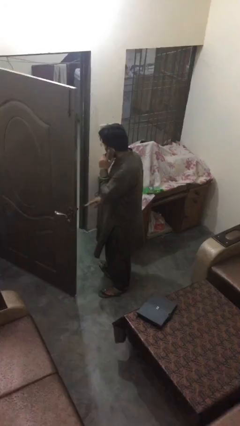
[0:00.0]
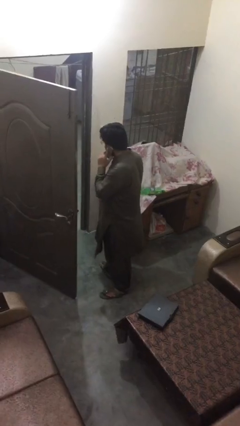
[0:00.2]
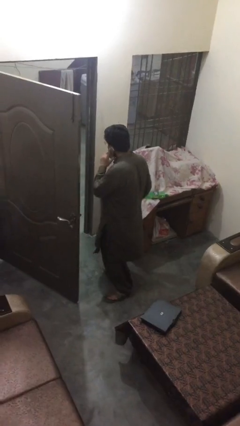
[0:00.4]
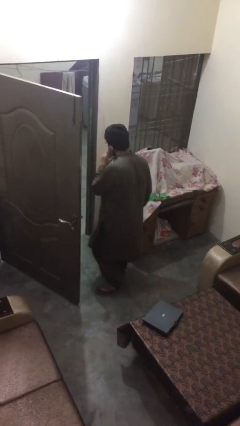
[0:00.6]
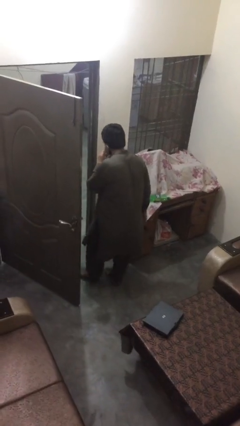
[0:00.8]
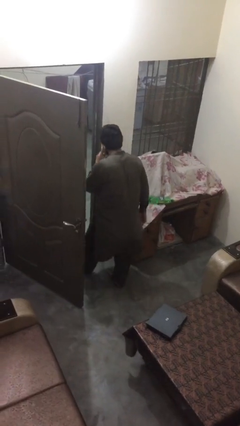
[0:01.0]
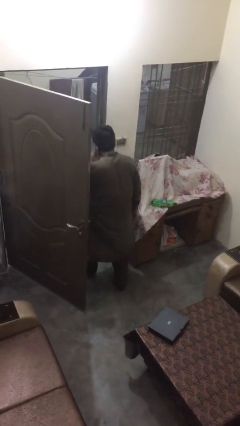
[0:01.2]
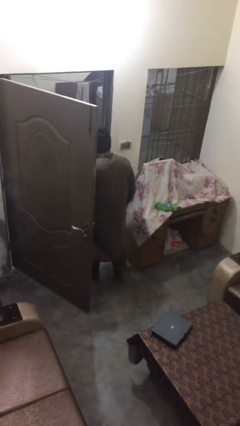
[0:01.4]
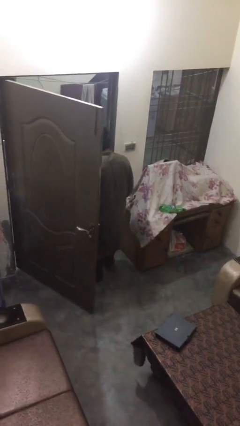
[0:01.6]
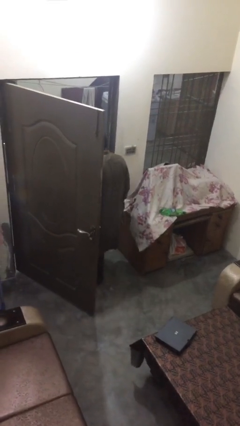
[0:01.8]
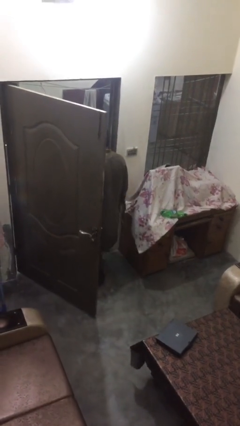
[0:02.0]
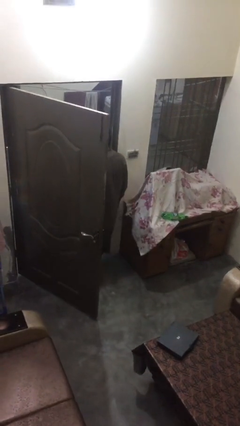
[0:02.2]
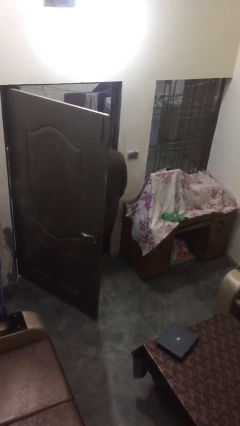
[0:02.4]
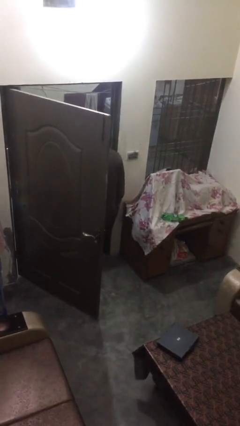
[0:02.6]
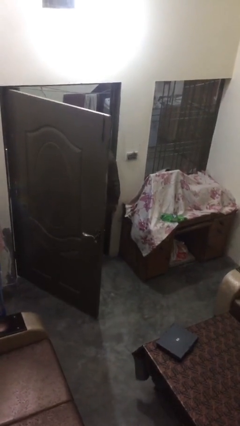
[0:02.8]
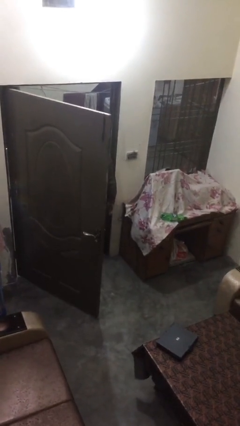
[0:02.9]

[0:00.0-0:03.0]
person exits scene through structure

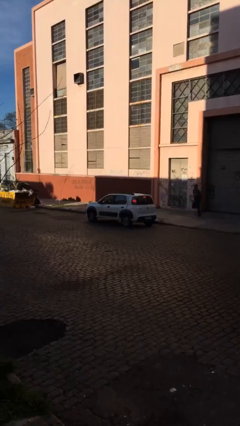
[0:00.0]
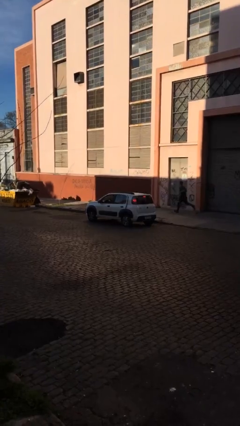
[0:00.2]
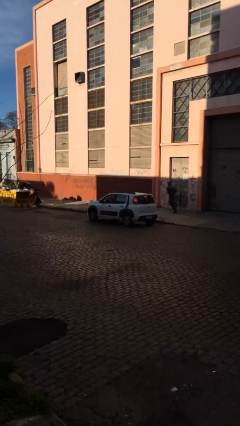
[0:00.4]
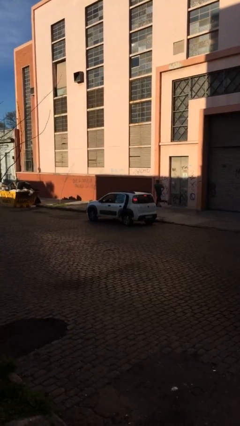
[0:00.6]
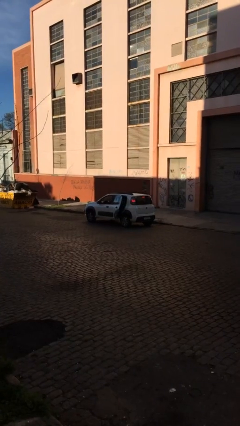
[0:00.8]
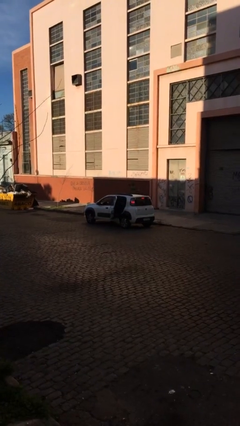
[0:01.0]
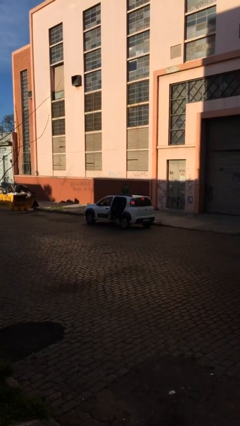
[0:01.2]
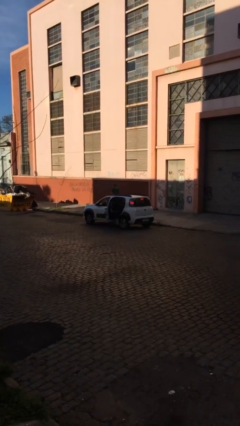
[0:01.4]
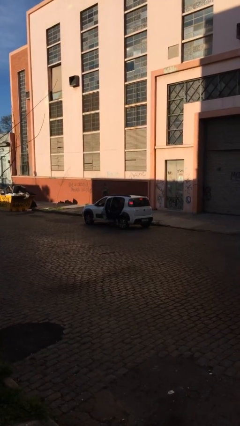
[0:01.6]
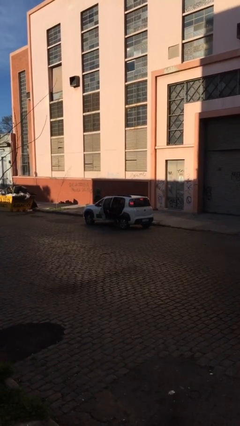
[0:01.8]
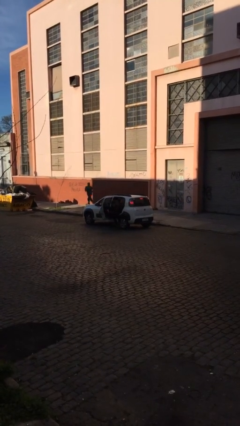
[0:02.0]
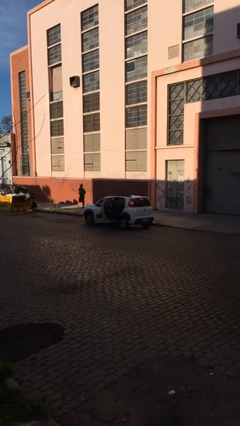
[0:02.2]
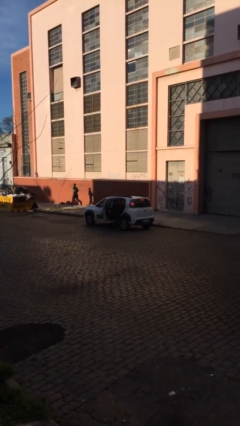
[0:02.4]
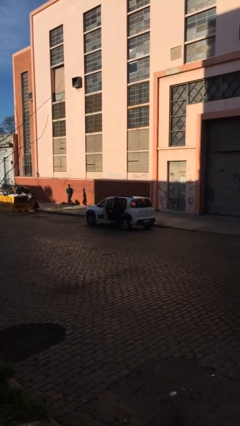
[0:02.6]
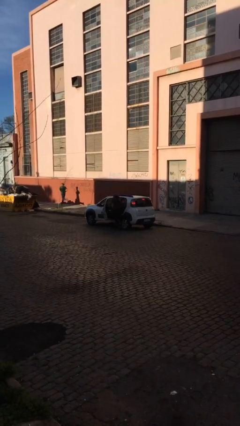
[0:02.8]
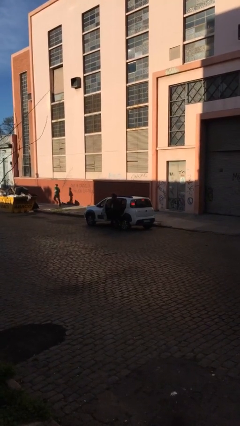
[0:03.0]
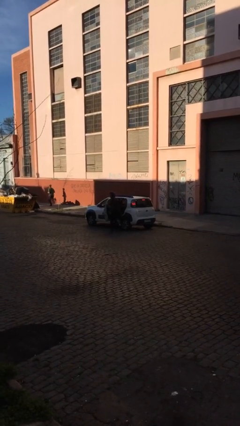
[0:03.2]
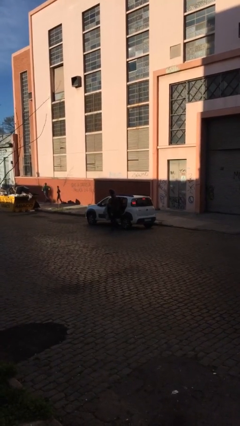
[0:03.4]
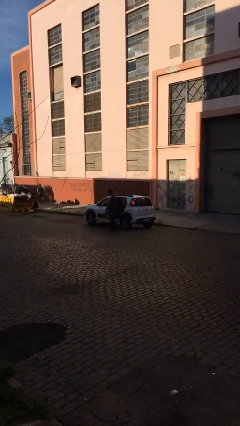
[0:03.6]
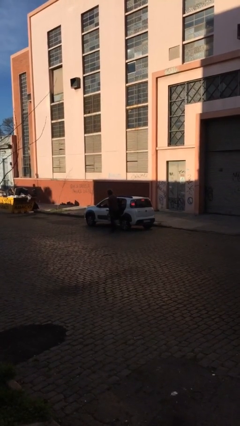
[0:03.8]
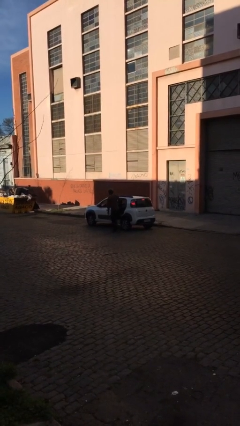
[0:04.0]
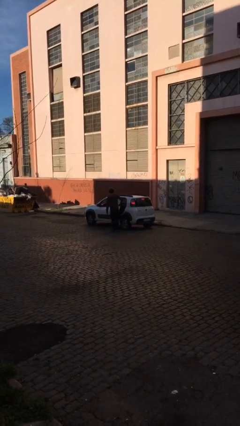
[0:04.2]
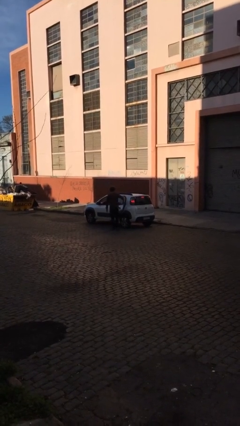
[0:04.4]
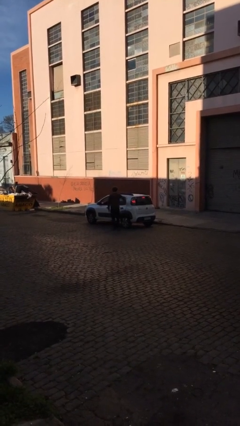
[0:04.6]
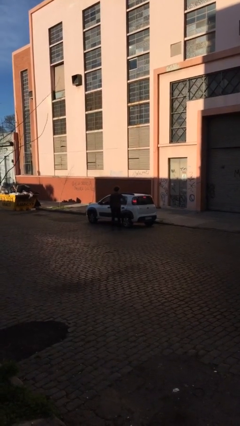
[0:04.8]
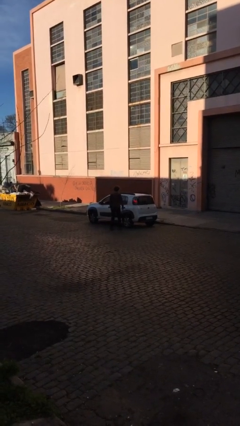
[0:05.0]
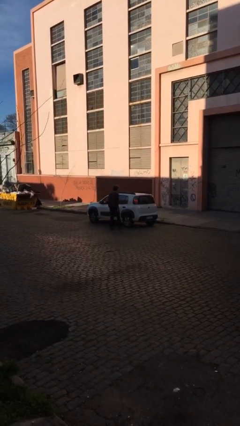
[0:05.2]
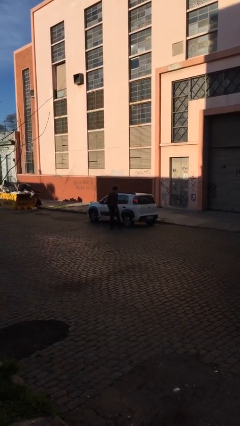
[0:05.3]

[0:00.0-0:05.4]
car drops off person

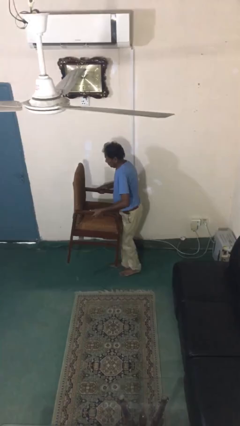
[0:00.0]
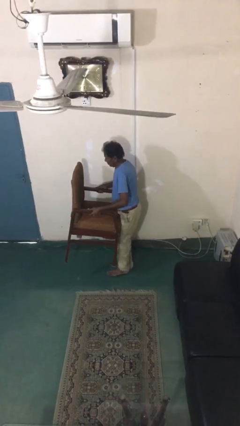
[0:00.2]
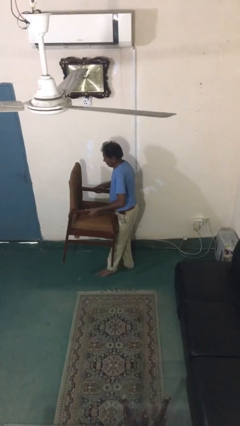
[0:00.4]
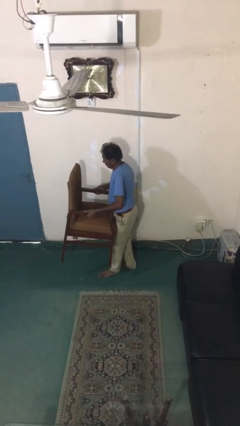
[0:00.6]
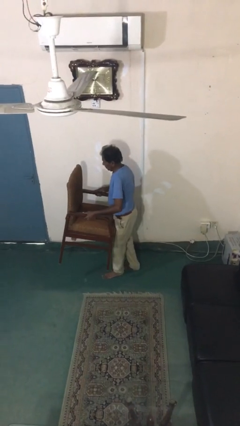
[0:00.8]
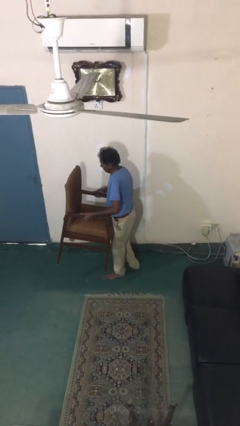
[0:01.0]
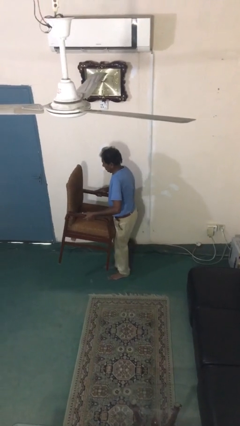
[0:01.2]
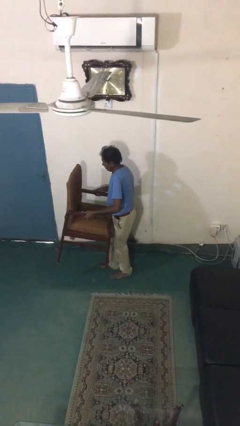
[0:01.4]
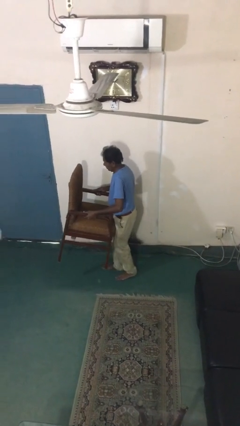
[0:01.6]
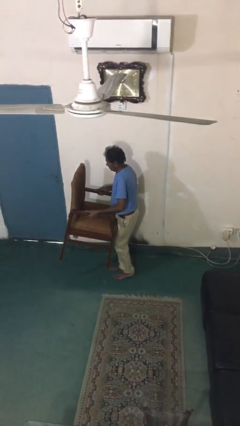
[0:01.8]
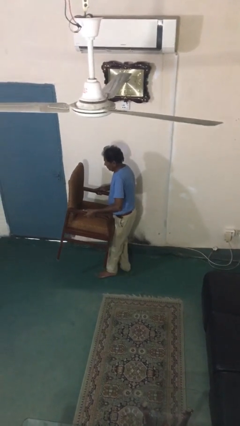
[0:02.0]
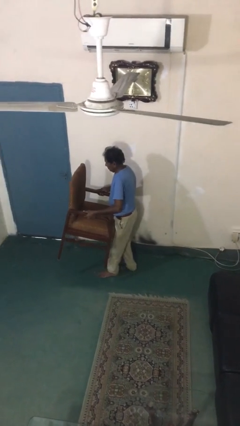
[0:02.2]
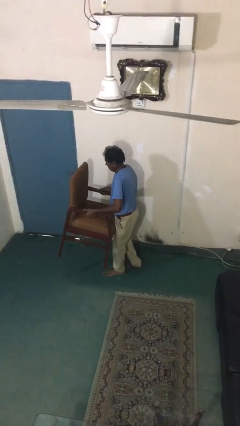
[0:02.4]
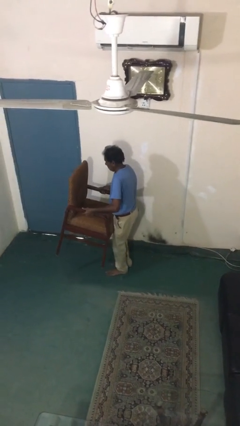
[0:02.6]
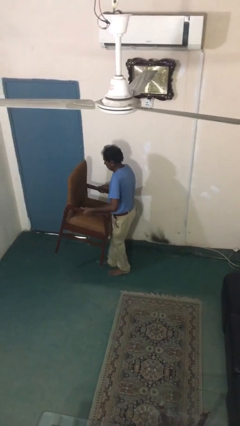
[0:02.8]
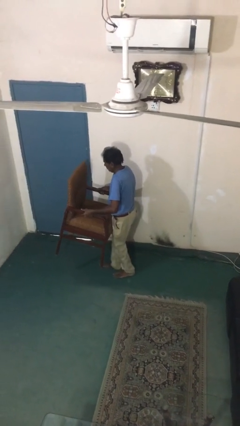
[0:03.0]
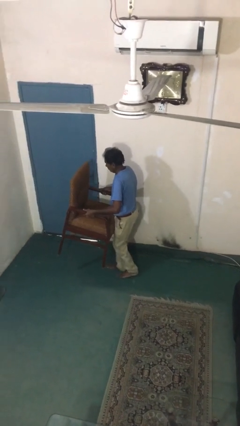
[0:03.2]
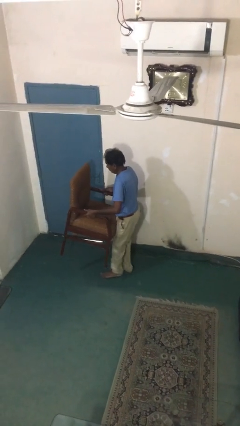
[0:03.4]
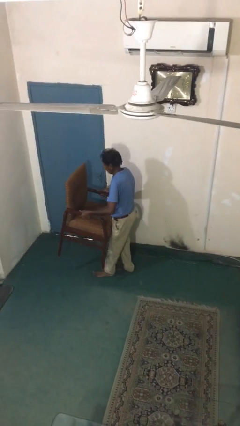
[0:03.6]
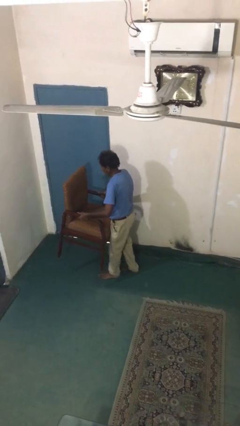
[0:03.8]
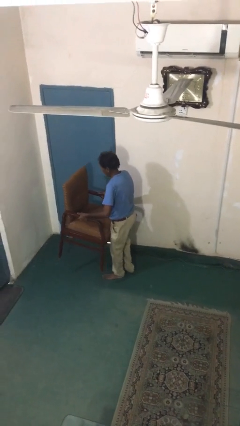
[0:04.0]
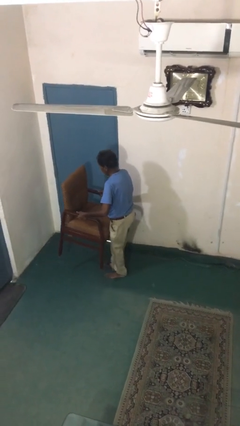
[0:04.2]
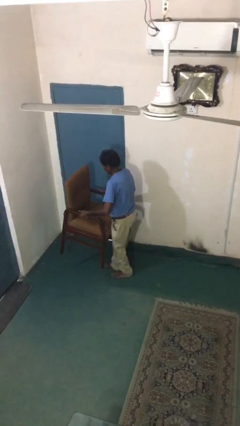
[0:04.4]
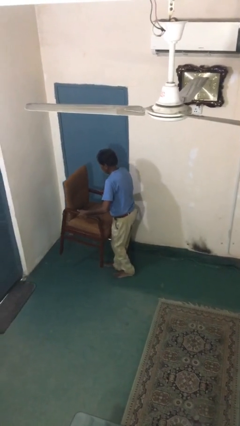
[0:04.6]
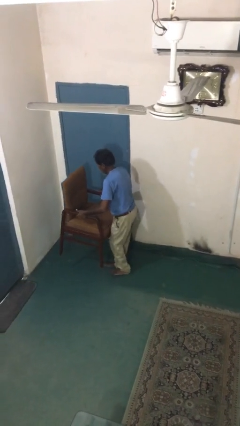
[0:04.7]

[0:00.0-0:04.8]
person carries heavy object

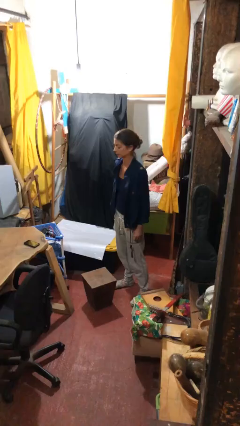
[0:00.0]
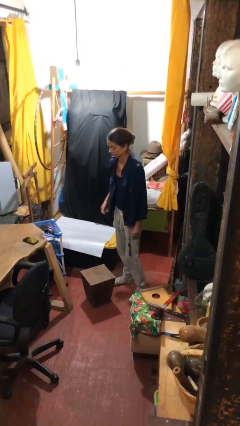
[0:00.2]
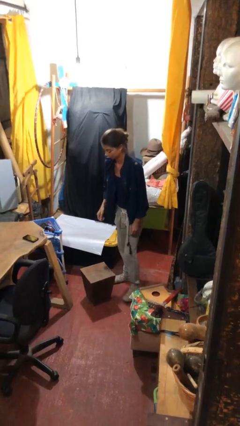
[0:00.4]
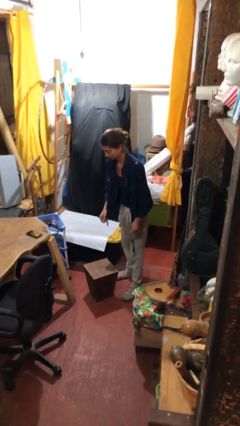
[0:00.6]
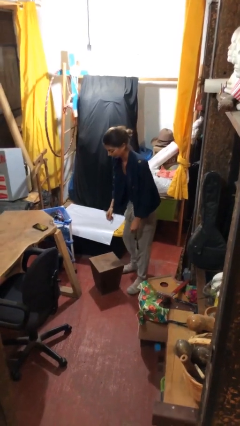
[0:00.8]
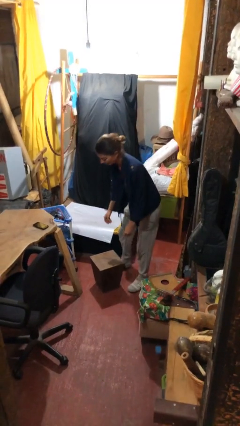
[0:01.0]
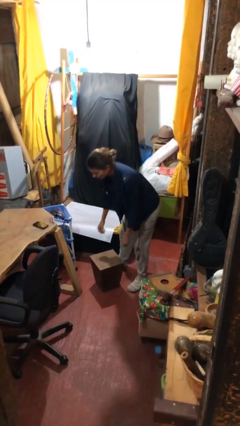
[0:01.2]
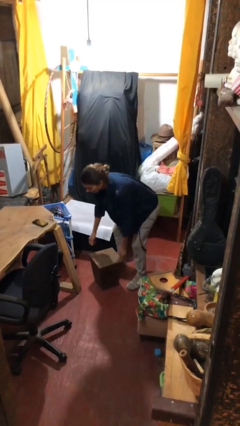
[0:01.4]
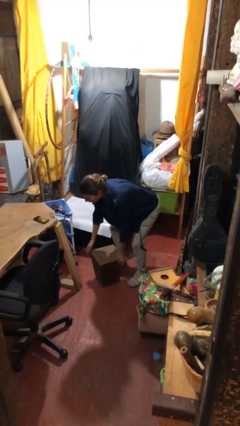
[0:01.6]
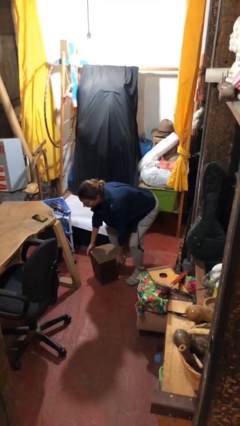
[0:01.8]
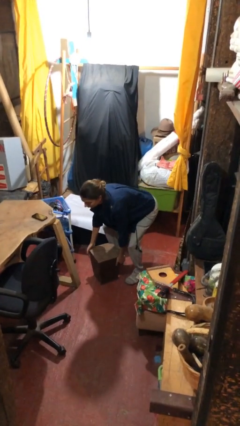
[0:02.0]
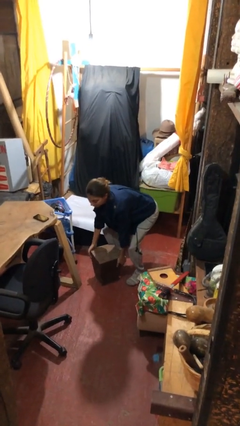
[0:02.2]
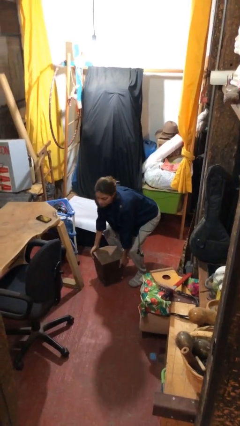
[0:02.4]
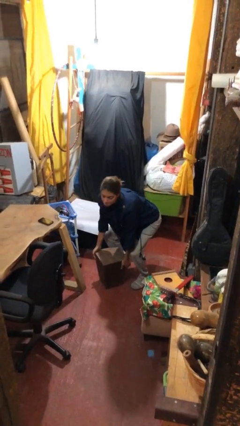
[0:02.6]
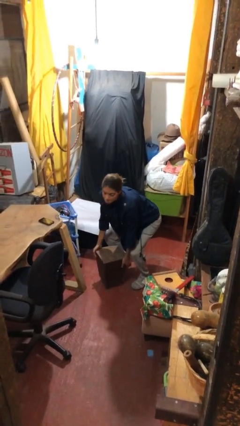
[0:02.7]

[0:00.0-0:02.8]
person picks up object from floor

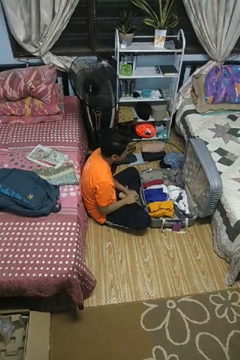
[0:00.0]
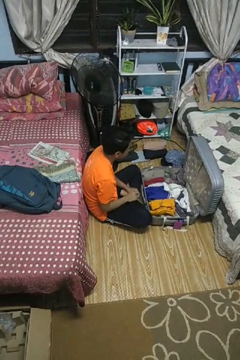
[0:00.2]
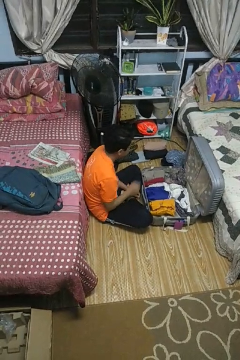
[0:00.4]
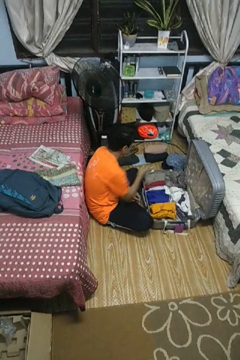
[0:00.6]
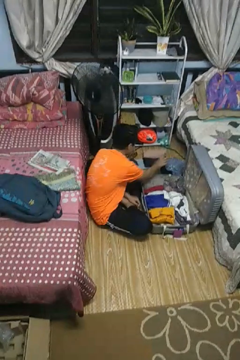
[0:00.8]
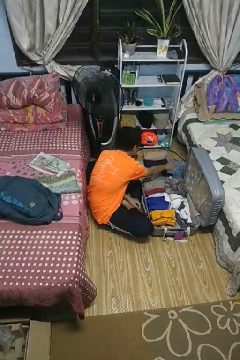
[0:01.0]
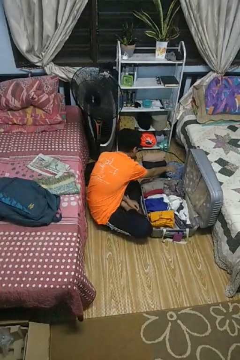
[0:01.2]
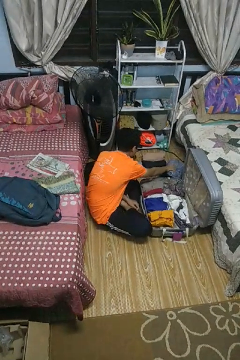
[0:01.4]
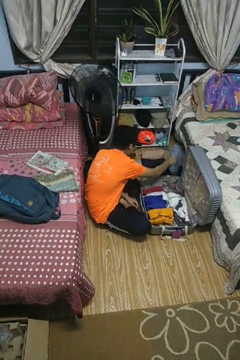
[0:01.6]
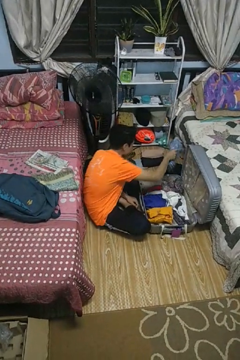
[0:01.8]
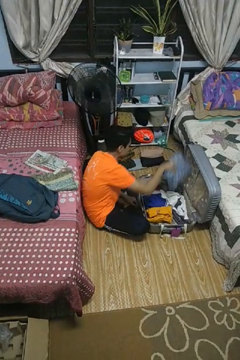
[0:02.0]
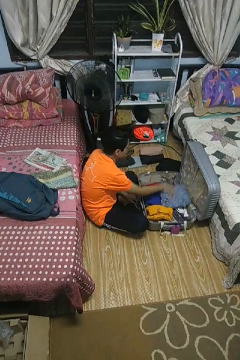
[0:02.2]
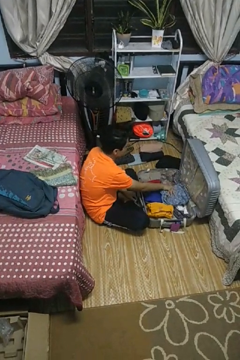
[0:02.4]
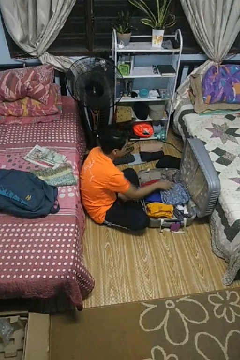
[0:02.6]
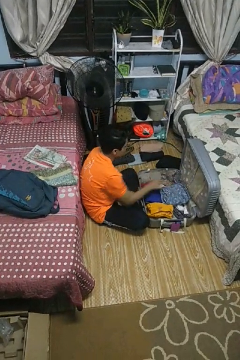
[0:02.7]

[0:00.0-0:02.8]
person loads clothes into suitcase
